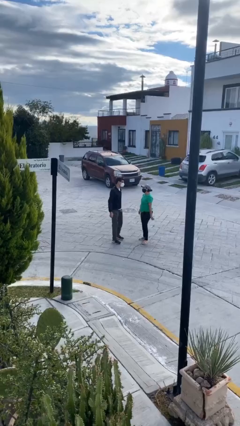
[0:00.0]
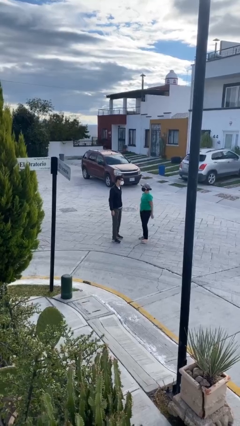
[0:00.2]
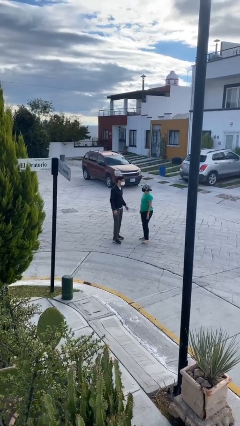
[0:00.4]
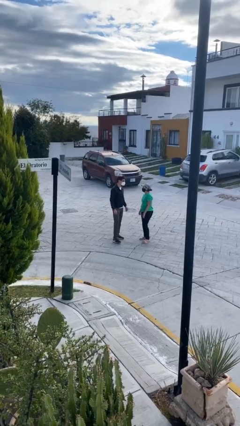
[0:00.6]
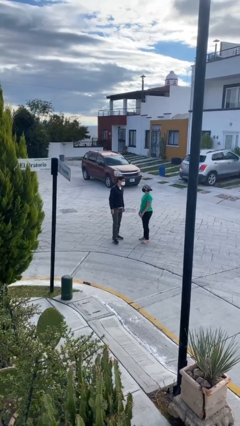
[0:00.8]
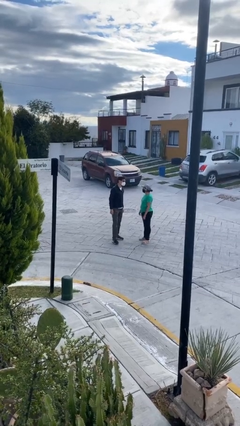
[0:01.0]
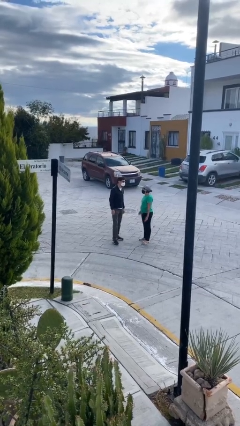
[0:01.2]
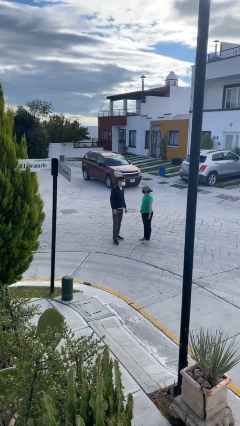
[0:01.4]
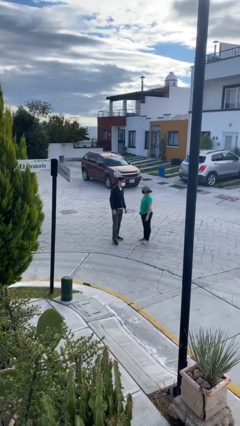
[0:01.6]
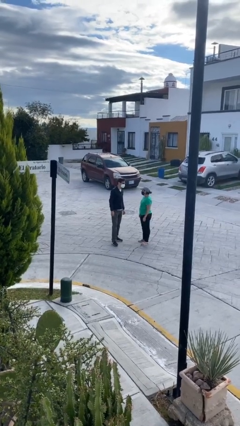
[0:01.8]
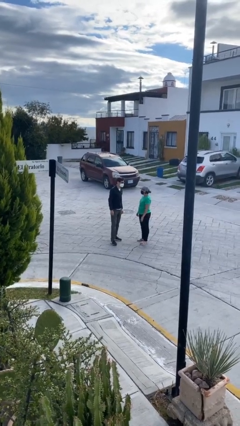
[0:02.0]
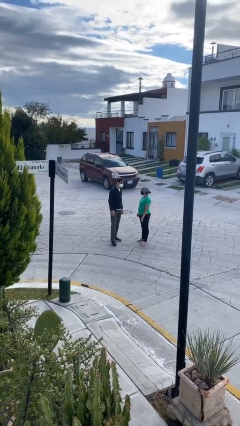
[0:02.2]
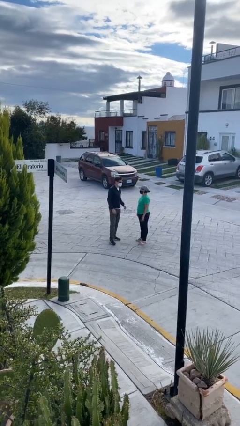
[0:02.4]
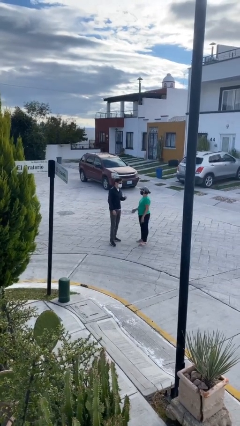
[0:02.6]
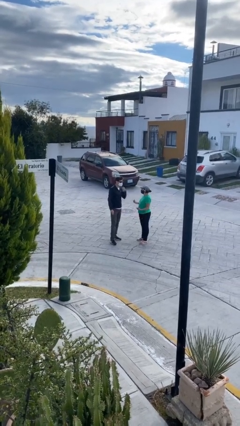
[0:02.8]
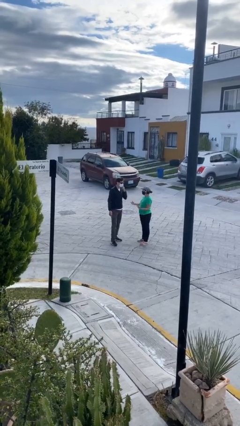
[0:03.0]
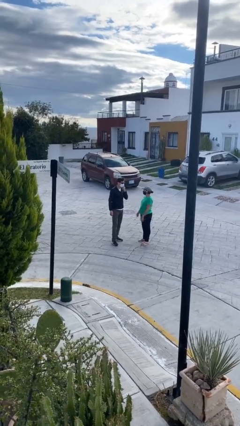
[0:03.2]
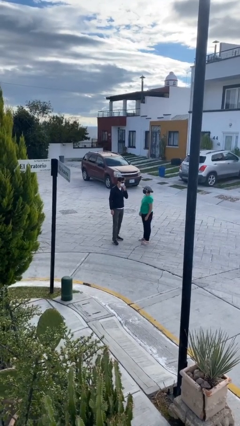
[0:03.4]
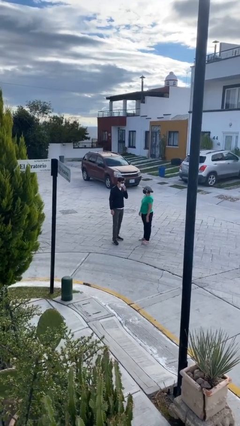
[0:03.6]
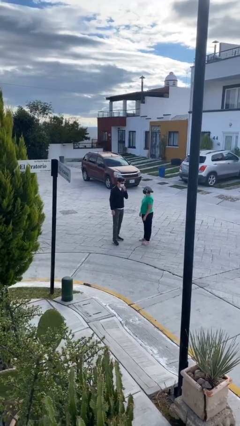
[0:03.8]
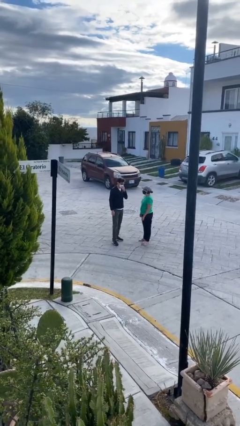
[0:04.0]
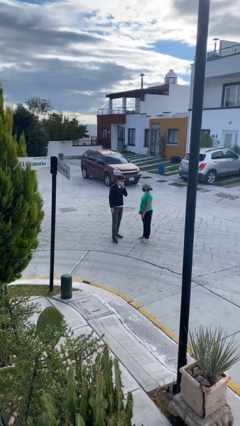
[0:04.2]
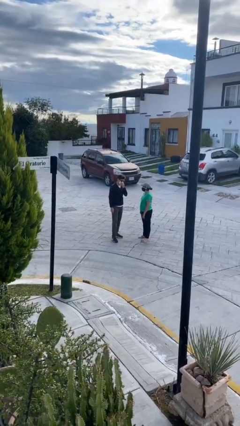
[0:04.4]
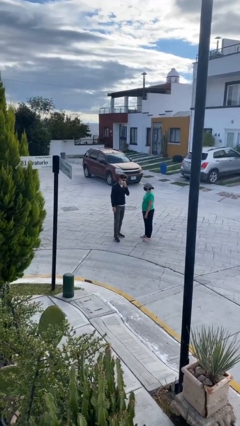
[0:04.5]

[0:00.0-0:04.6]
person talks to person

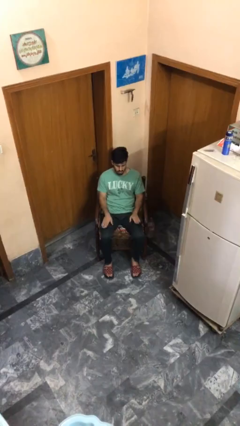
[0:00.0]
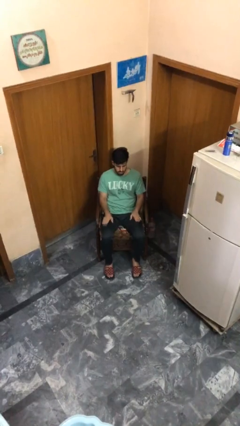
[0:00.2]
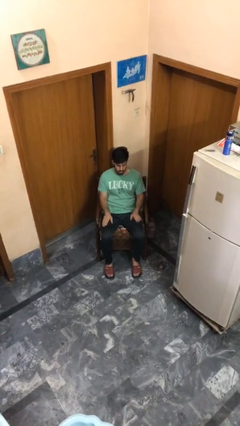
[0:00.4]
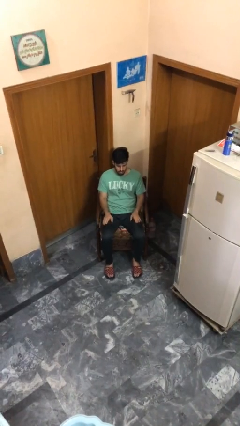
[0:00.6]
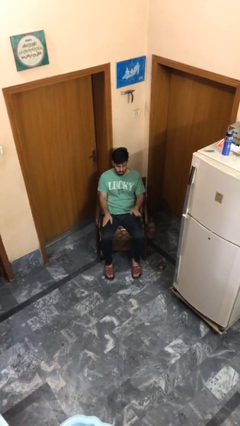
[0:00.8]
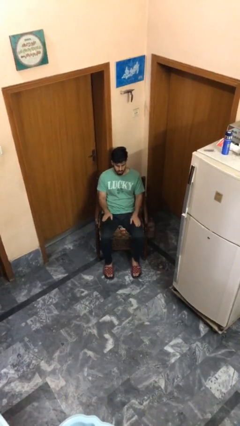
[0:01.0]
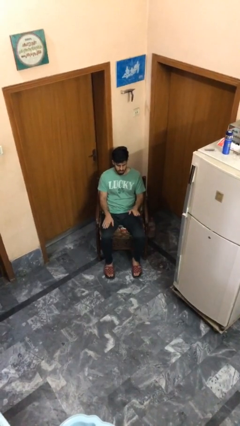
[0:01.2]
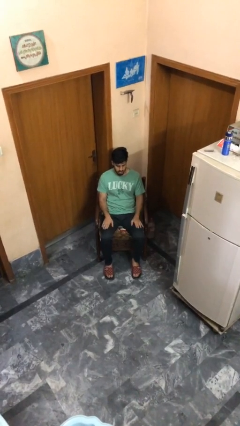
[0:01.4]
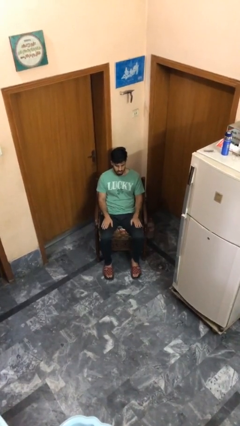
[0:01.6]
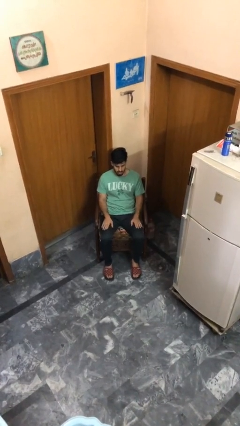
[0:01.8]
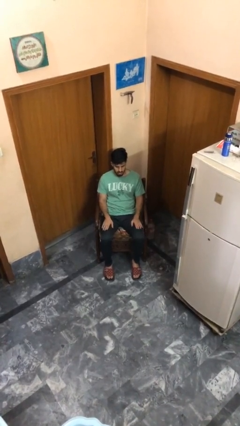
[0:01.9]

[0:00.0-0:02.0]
person slaps hands on thighs

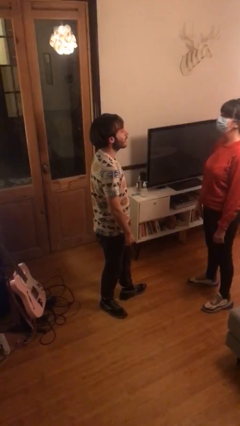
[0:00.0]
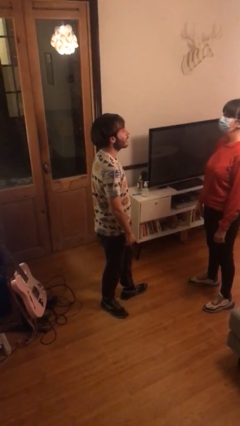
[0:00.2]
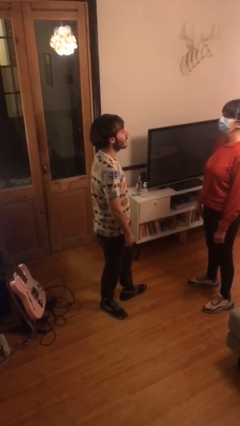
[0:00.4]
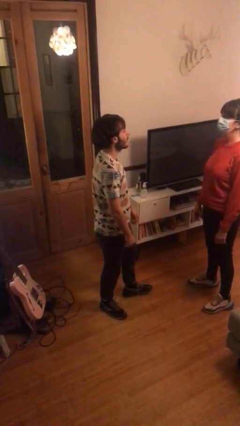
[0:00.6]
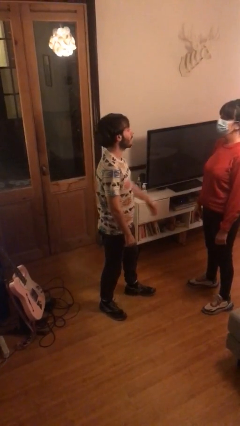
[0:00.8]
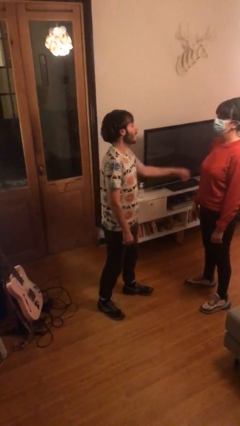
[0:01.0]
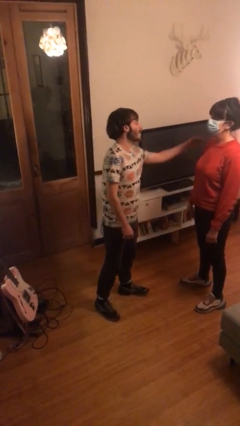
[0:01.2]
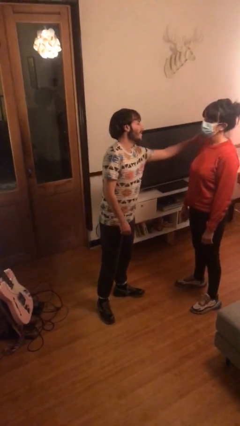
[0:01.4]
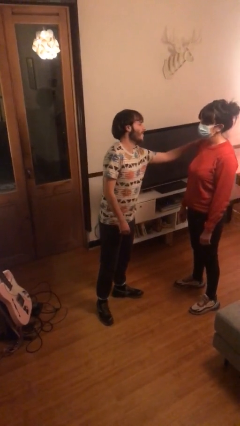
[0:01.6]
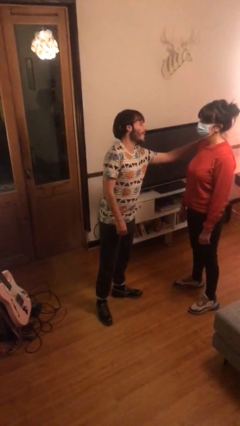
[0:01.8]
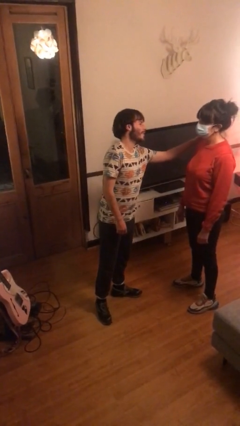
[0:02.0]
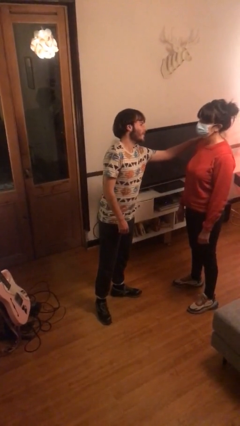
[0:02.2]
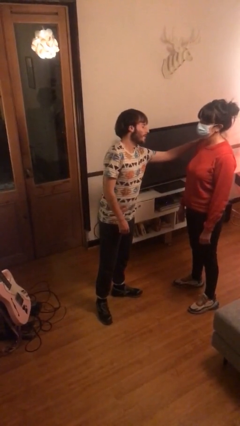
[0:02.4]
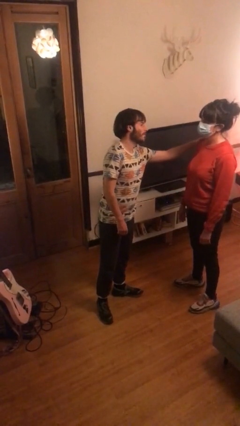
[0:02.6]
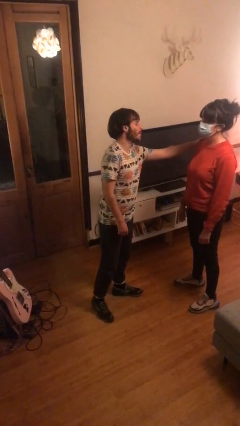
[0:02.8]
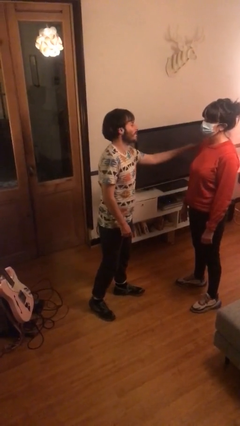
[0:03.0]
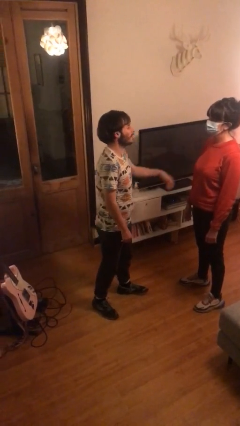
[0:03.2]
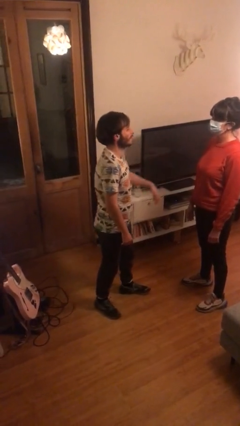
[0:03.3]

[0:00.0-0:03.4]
person pounds shoulders of person

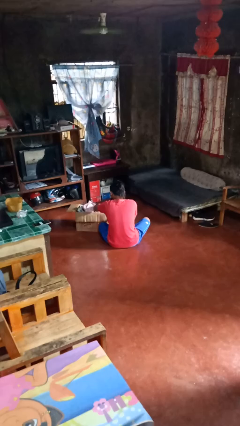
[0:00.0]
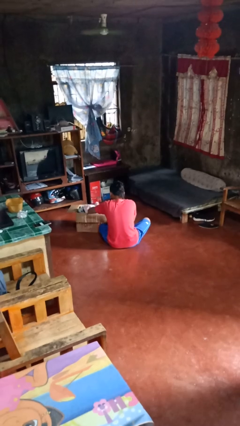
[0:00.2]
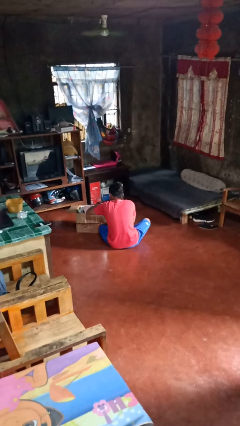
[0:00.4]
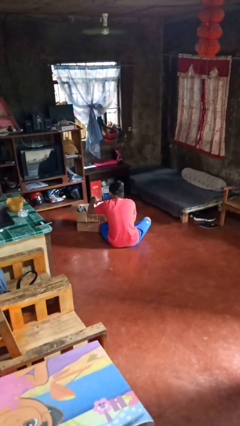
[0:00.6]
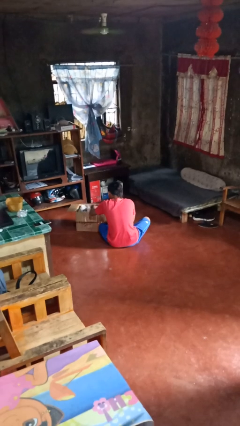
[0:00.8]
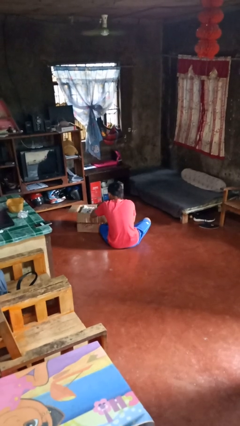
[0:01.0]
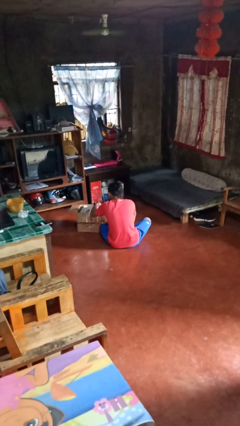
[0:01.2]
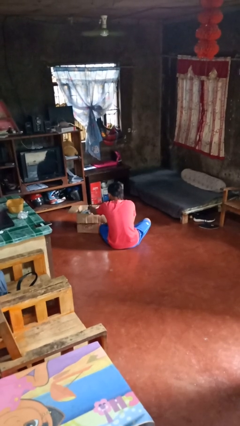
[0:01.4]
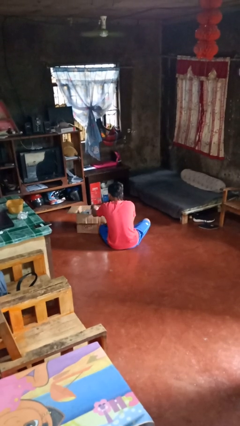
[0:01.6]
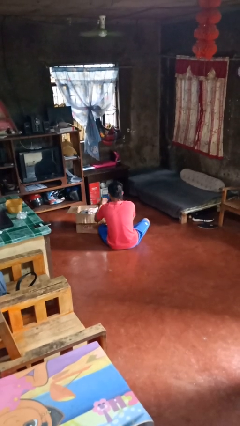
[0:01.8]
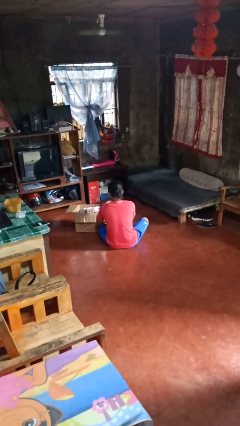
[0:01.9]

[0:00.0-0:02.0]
person searches in box

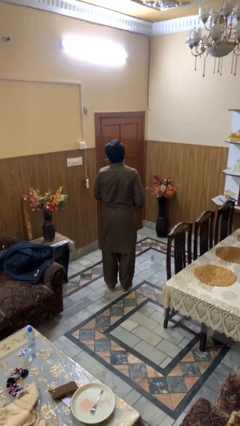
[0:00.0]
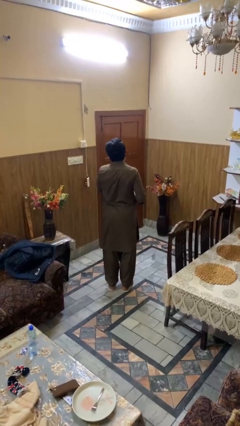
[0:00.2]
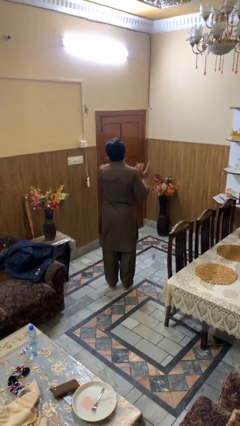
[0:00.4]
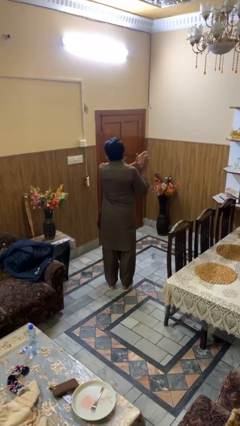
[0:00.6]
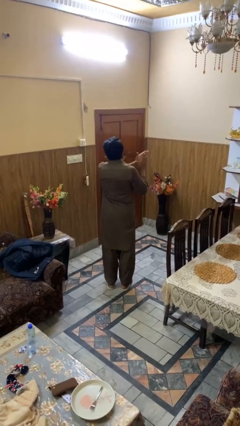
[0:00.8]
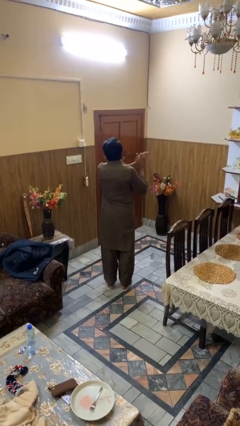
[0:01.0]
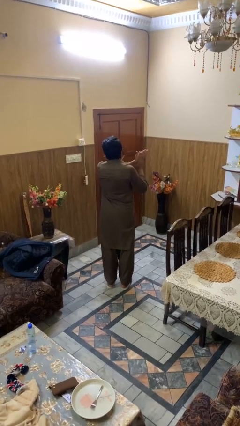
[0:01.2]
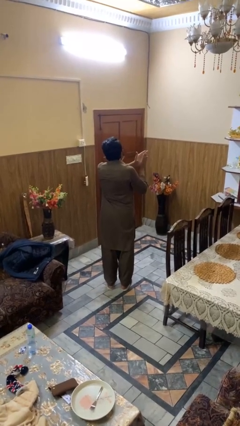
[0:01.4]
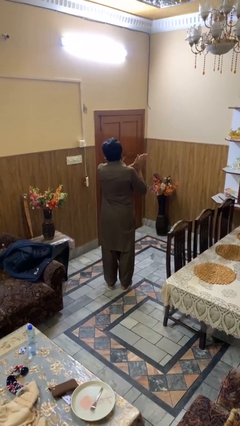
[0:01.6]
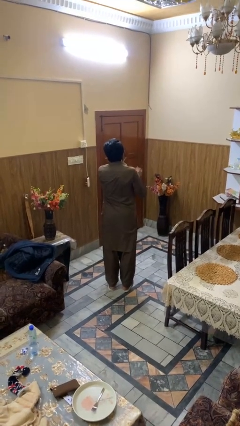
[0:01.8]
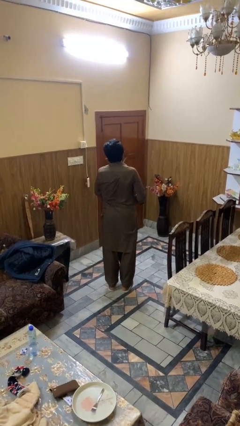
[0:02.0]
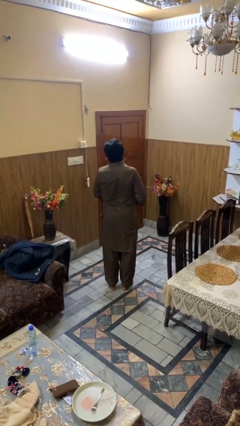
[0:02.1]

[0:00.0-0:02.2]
person claps hands

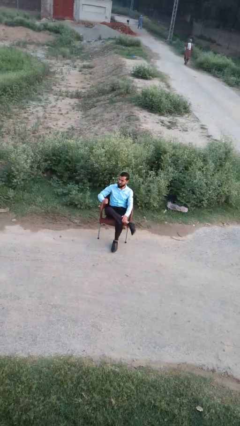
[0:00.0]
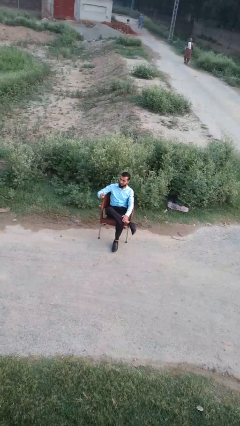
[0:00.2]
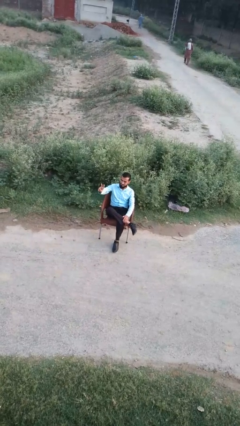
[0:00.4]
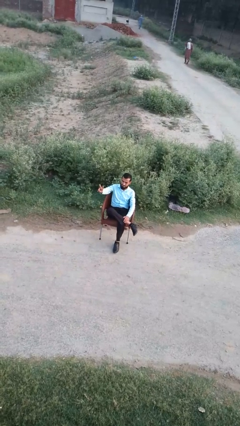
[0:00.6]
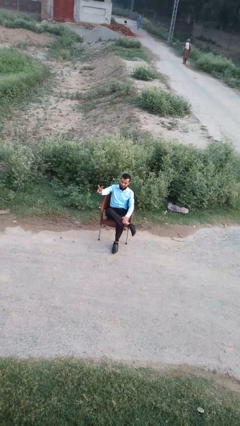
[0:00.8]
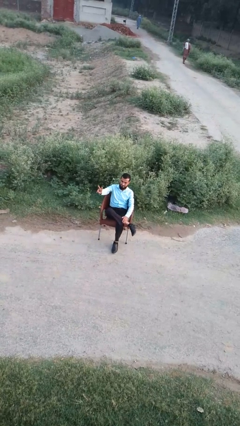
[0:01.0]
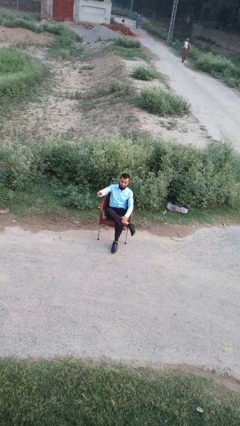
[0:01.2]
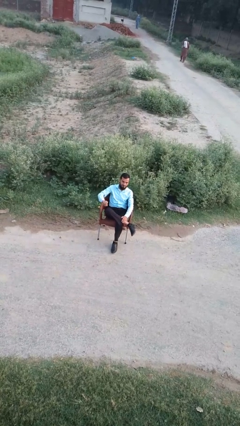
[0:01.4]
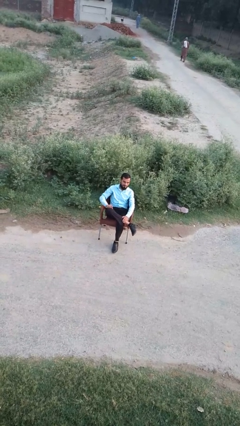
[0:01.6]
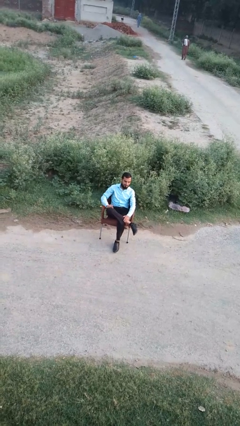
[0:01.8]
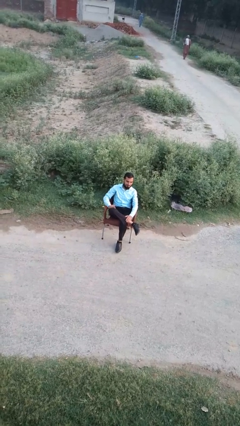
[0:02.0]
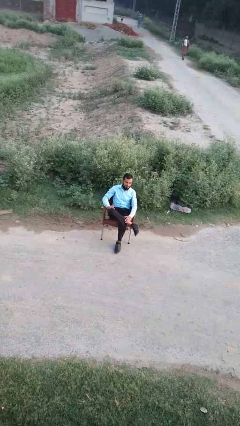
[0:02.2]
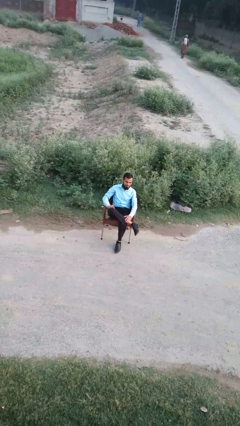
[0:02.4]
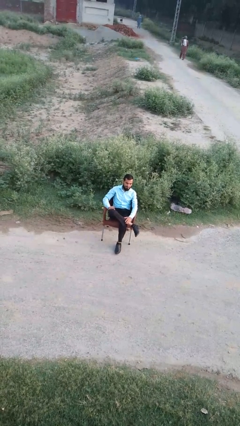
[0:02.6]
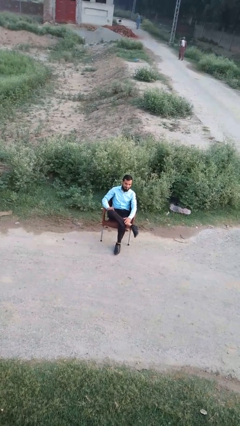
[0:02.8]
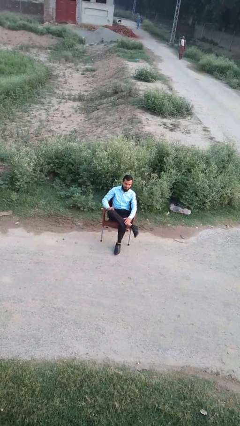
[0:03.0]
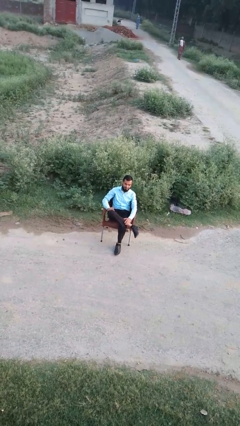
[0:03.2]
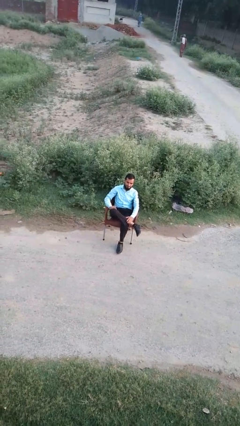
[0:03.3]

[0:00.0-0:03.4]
person gestures peace
